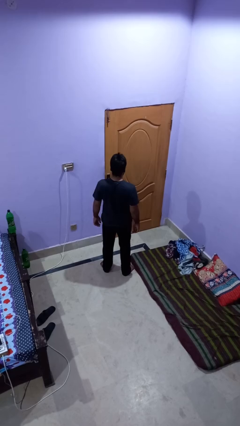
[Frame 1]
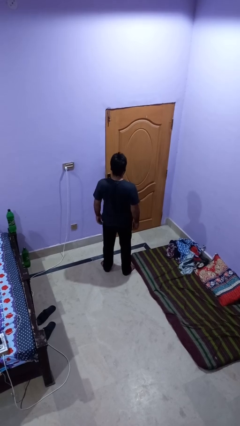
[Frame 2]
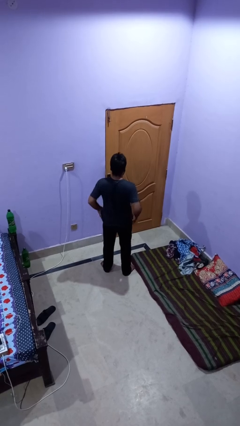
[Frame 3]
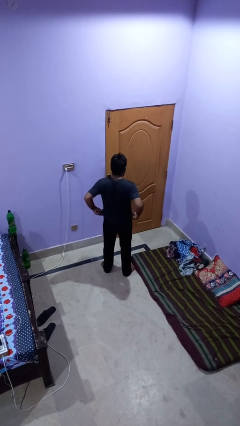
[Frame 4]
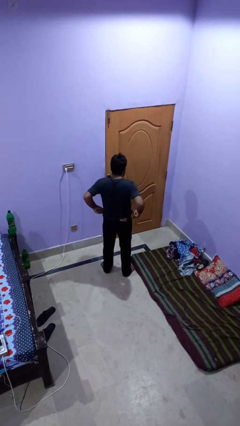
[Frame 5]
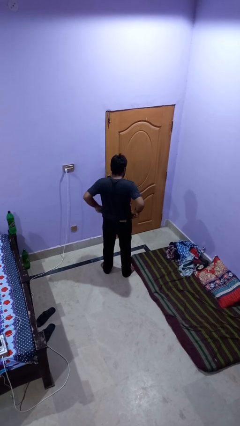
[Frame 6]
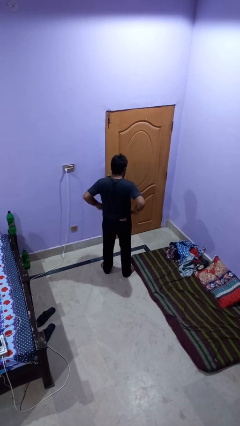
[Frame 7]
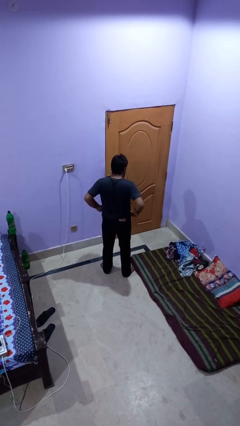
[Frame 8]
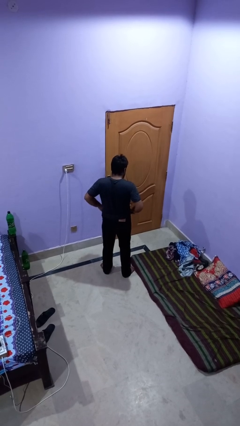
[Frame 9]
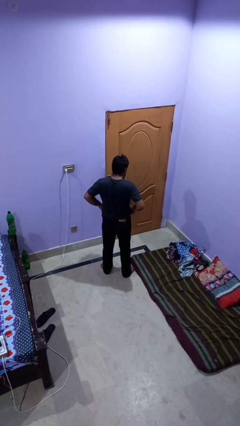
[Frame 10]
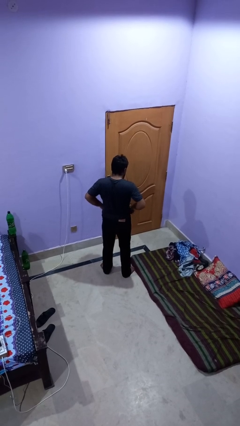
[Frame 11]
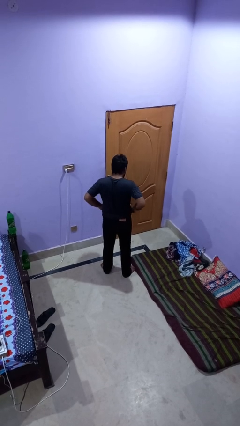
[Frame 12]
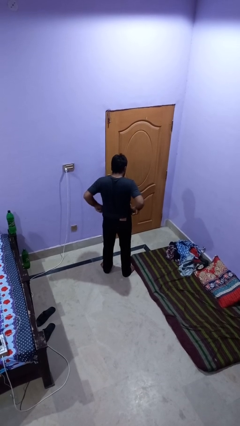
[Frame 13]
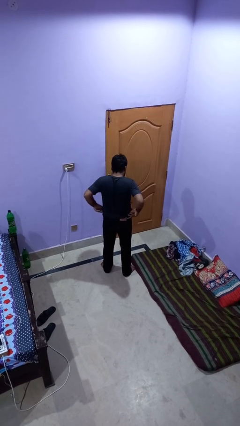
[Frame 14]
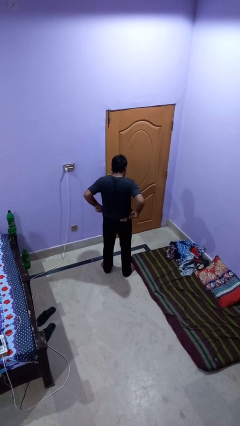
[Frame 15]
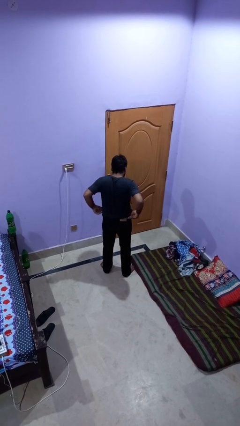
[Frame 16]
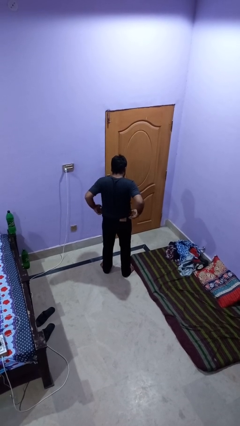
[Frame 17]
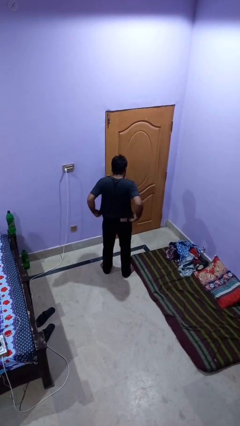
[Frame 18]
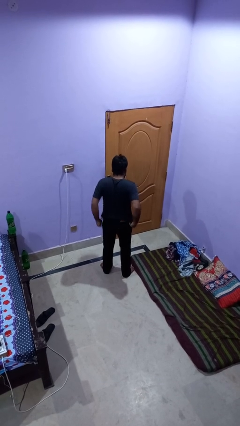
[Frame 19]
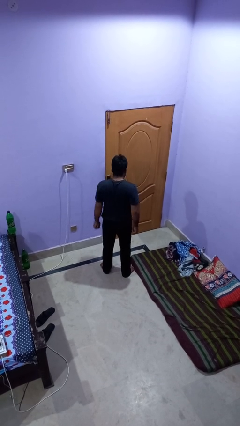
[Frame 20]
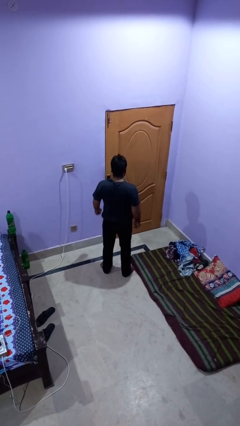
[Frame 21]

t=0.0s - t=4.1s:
person hikes up pants

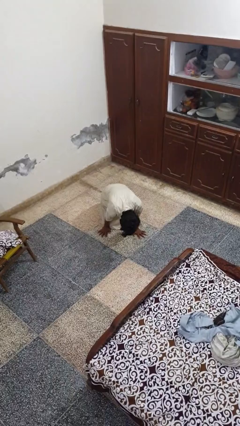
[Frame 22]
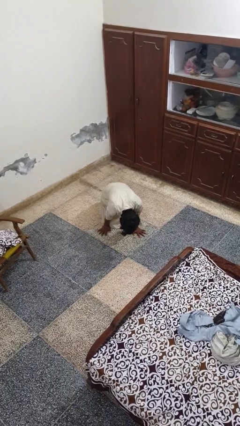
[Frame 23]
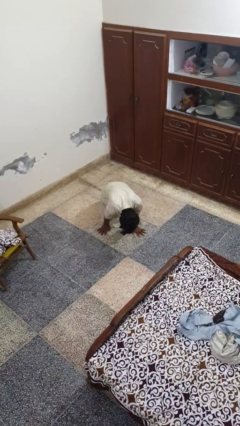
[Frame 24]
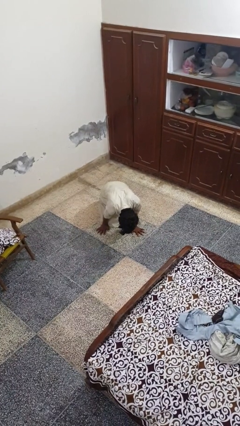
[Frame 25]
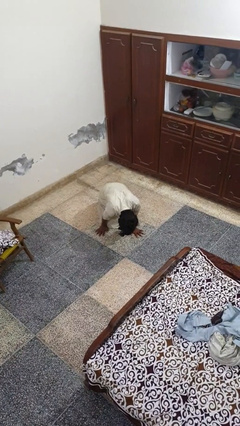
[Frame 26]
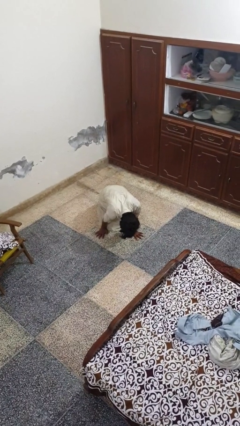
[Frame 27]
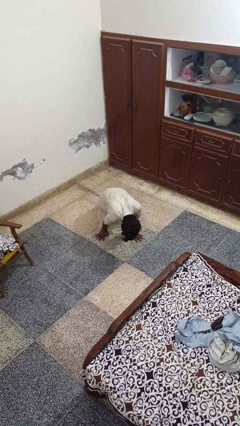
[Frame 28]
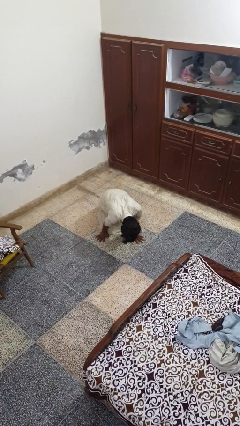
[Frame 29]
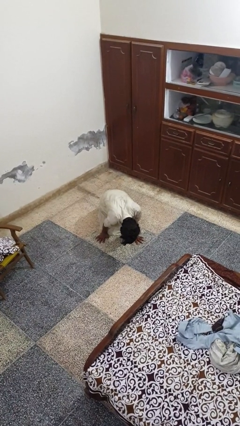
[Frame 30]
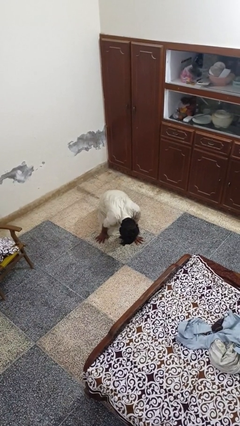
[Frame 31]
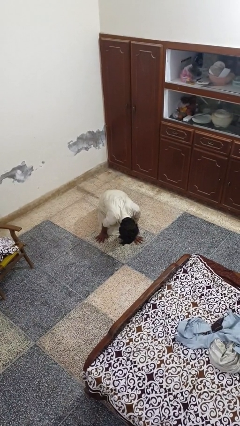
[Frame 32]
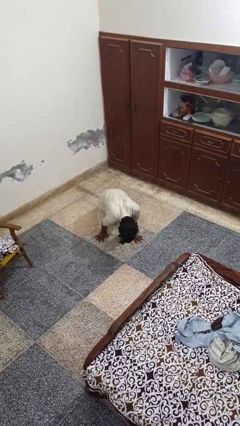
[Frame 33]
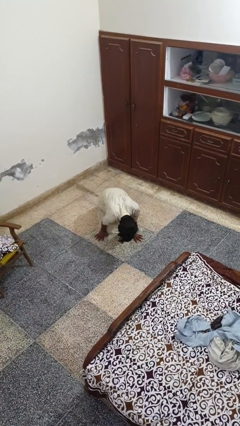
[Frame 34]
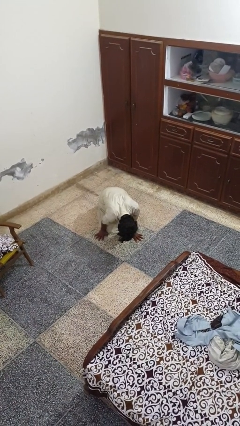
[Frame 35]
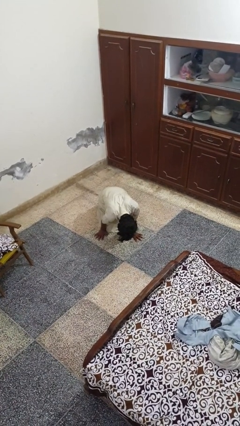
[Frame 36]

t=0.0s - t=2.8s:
person lies down on floor

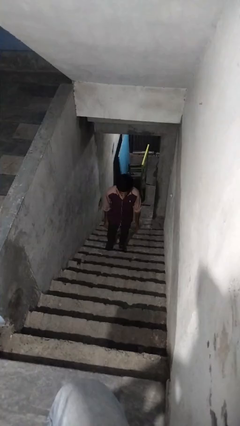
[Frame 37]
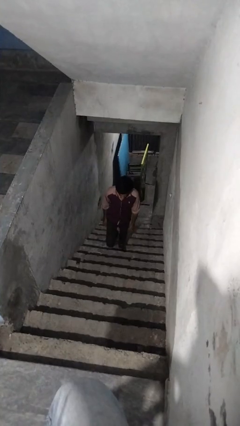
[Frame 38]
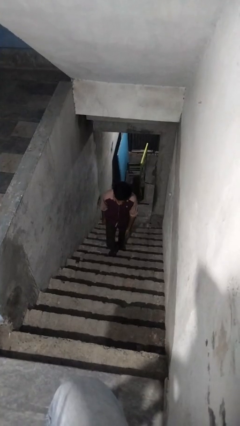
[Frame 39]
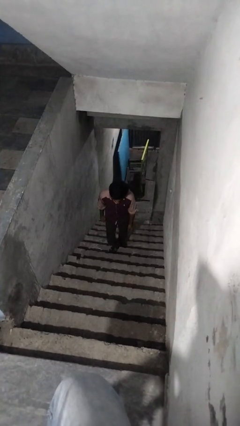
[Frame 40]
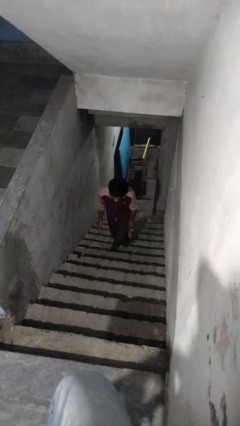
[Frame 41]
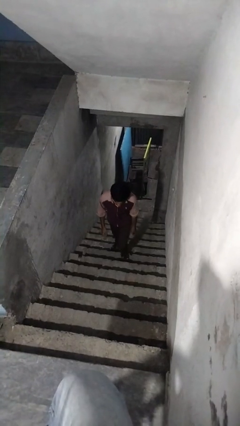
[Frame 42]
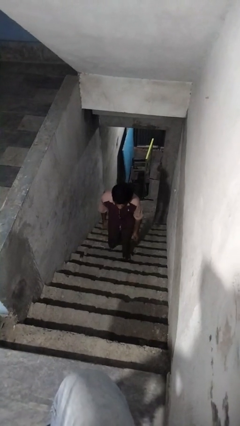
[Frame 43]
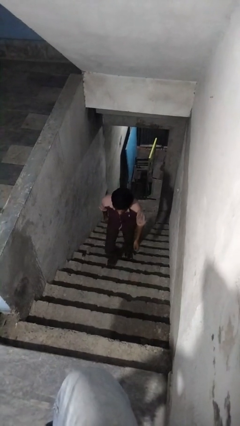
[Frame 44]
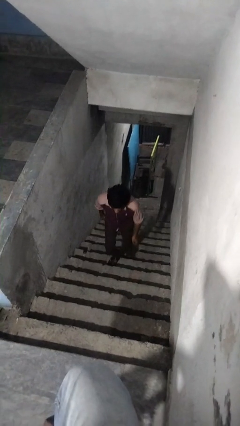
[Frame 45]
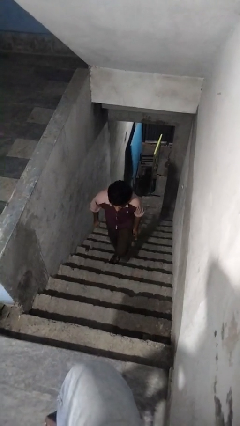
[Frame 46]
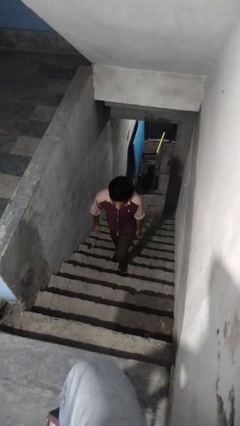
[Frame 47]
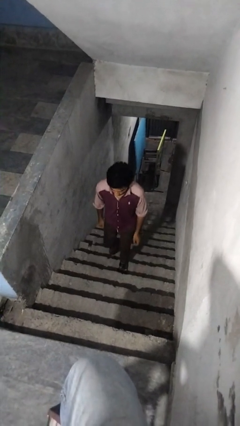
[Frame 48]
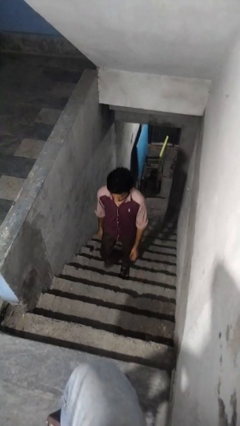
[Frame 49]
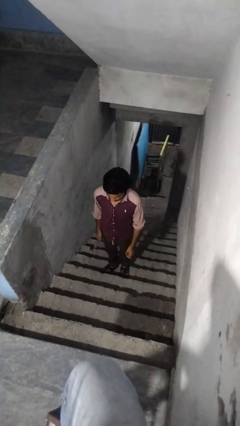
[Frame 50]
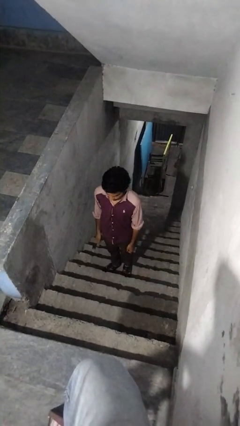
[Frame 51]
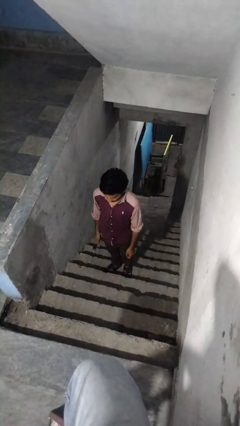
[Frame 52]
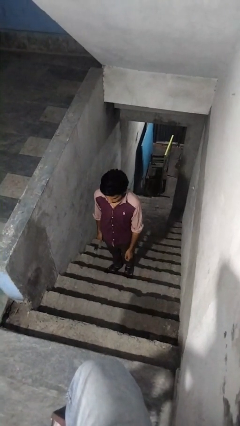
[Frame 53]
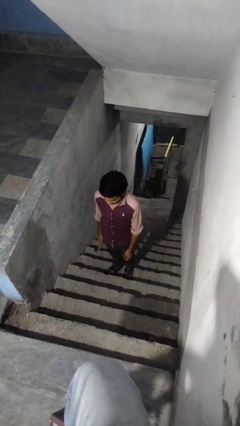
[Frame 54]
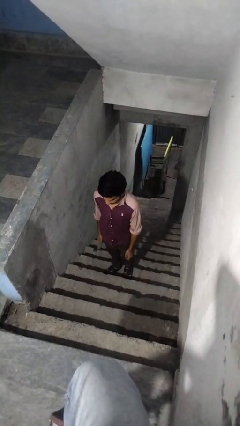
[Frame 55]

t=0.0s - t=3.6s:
person climbs up stairs

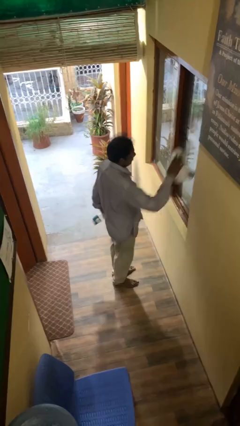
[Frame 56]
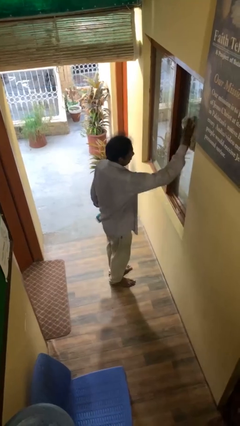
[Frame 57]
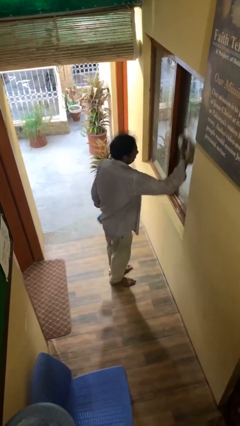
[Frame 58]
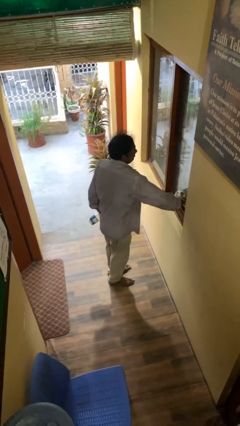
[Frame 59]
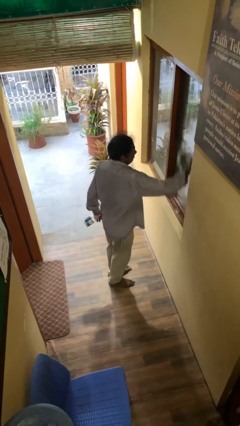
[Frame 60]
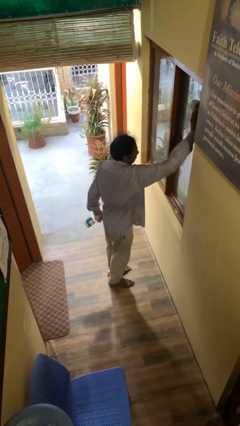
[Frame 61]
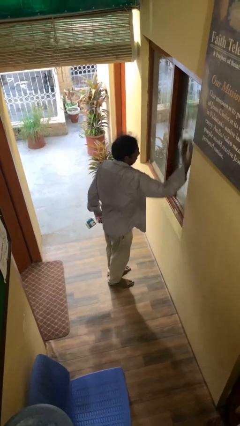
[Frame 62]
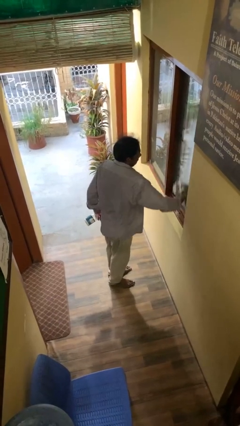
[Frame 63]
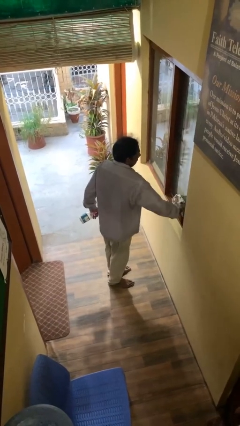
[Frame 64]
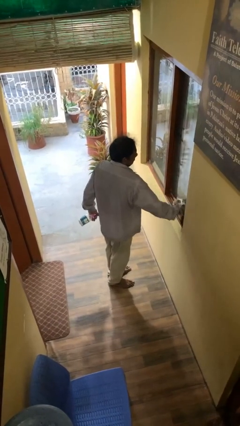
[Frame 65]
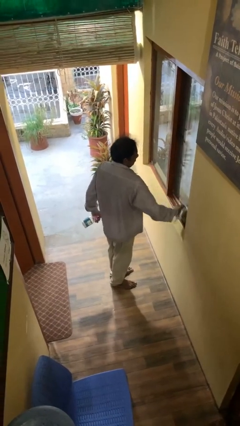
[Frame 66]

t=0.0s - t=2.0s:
person washes window

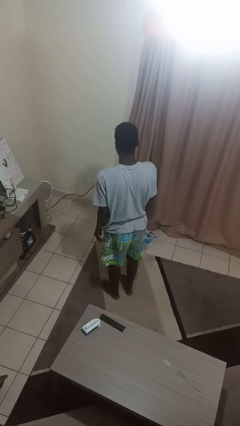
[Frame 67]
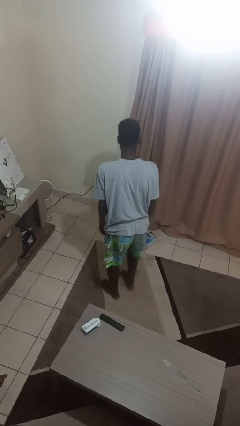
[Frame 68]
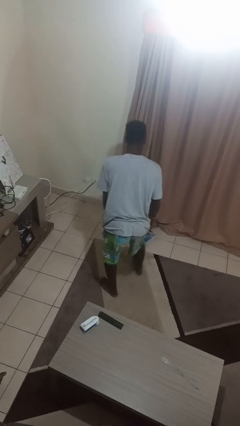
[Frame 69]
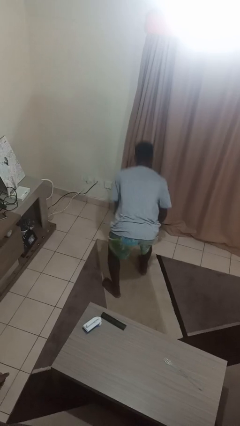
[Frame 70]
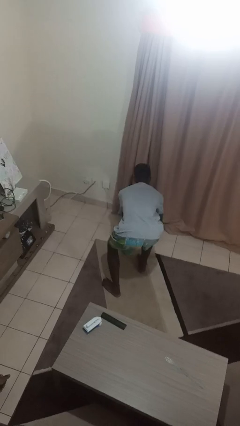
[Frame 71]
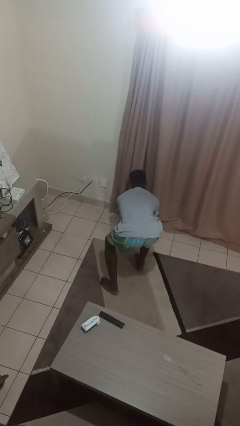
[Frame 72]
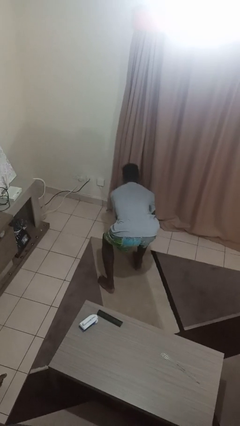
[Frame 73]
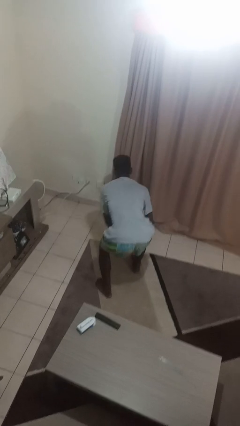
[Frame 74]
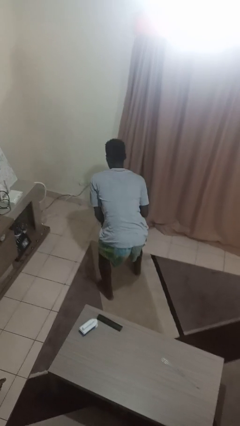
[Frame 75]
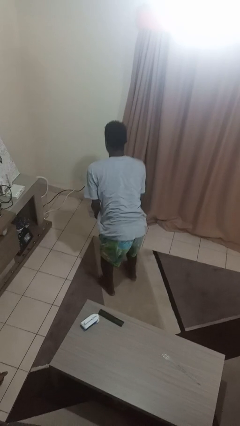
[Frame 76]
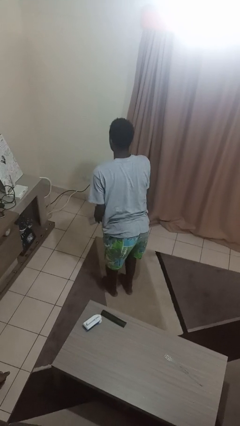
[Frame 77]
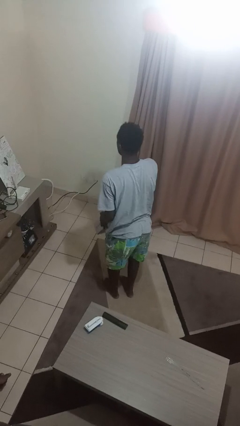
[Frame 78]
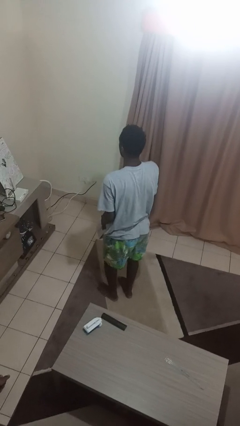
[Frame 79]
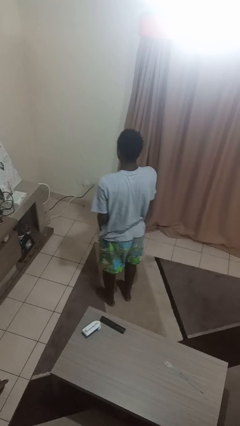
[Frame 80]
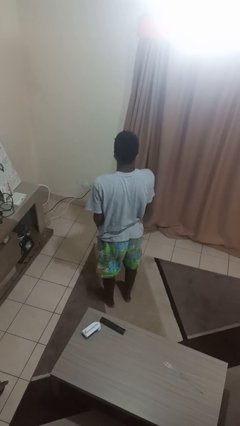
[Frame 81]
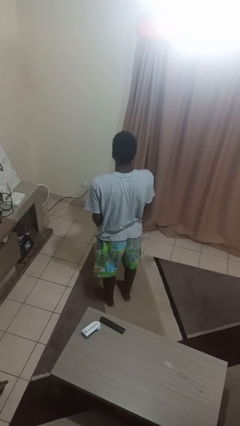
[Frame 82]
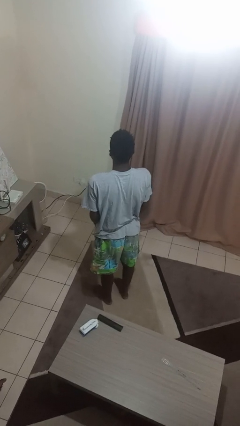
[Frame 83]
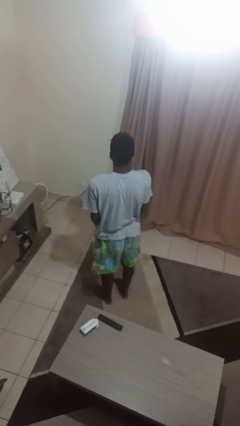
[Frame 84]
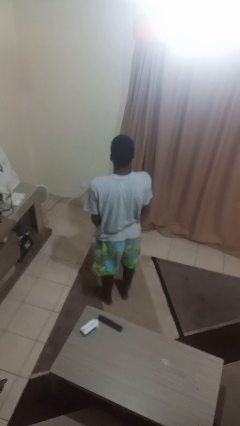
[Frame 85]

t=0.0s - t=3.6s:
person picks up object from floor

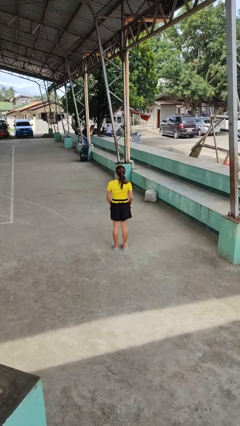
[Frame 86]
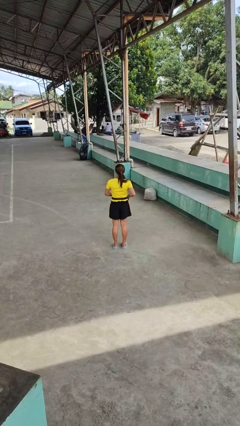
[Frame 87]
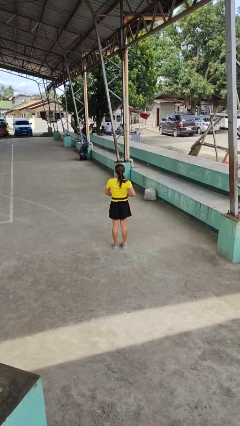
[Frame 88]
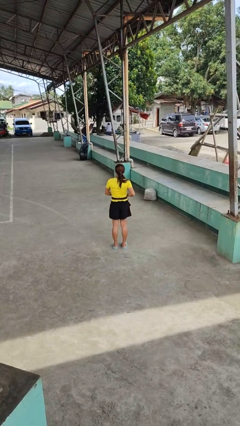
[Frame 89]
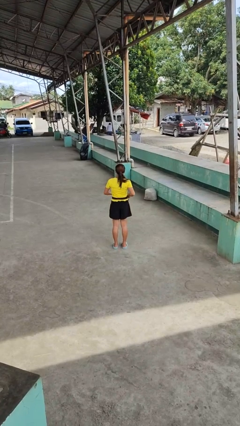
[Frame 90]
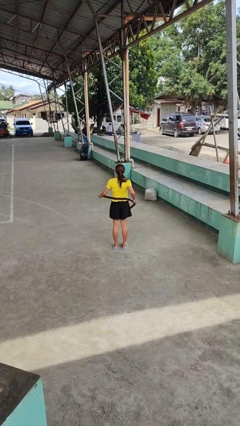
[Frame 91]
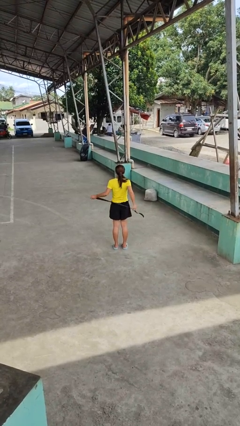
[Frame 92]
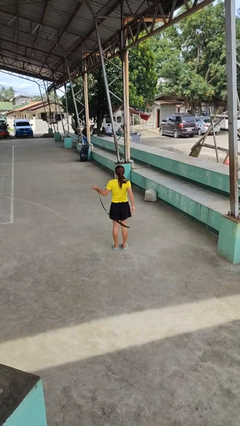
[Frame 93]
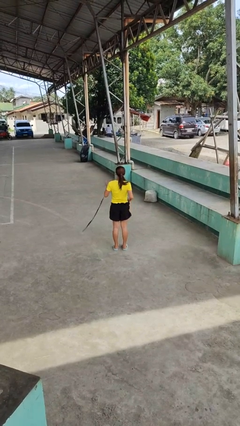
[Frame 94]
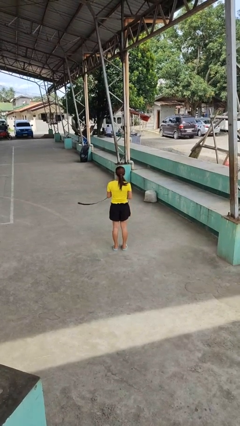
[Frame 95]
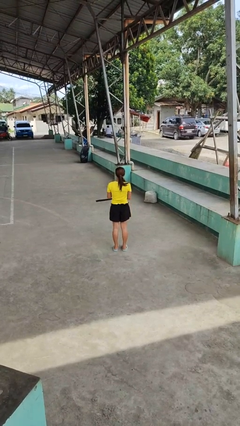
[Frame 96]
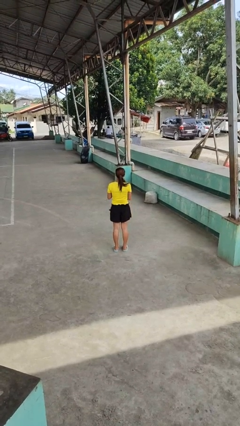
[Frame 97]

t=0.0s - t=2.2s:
person takes off belt
